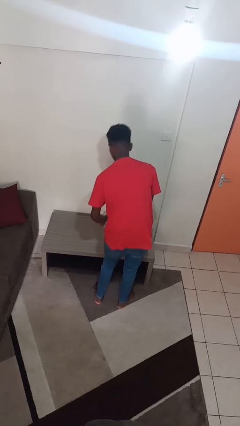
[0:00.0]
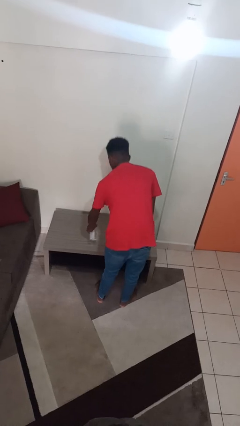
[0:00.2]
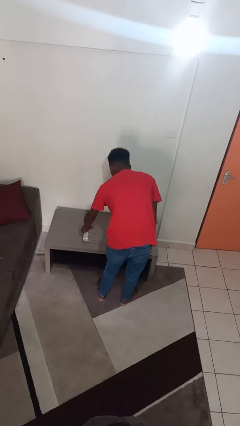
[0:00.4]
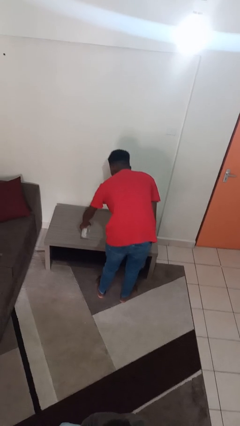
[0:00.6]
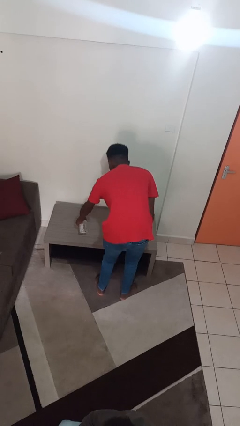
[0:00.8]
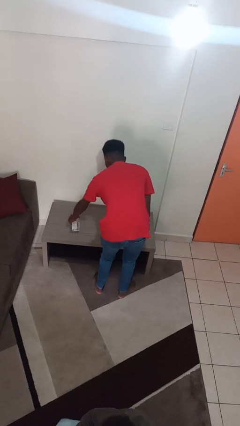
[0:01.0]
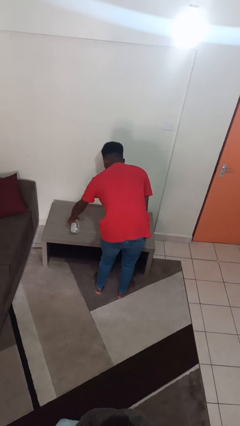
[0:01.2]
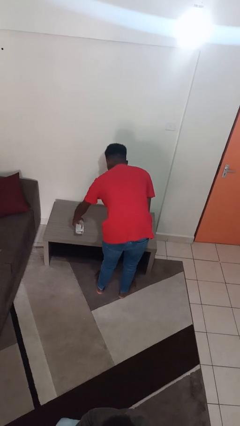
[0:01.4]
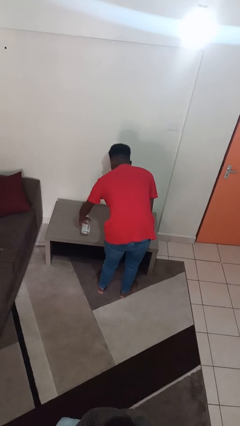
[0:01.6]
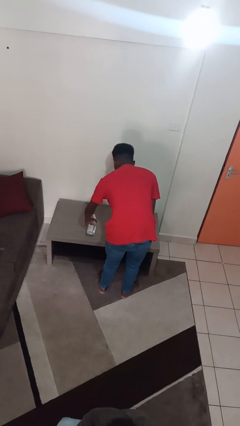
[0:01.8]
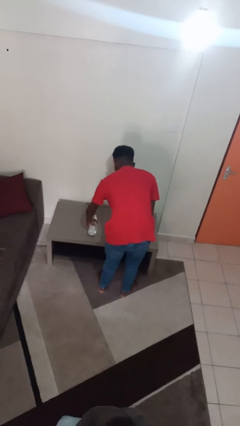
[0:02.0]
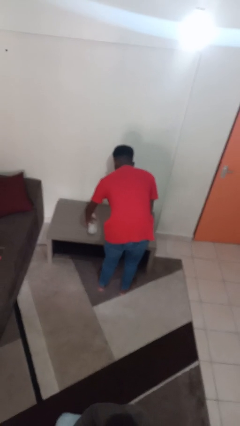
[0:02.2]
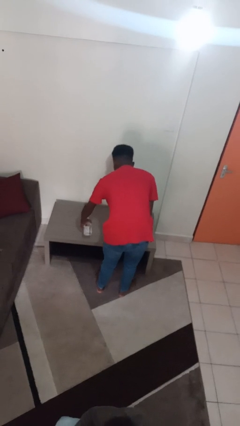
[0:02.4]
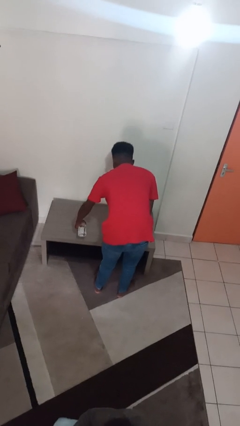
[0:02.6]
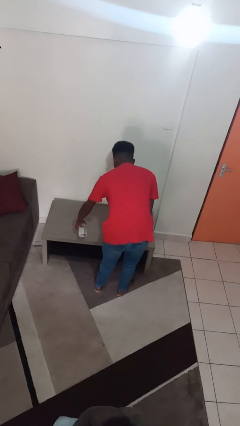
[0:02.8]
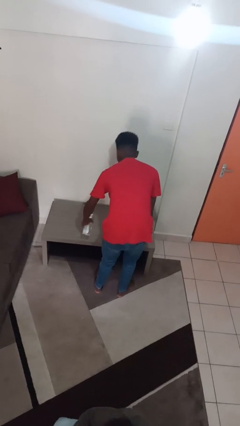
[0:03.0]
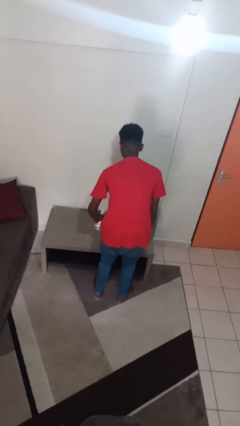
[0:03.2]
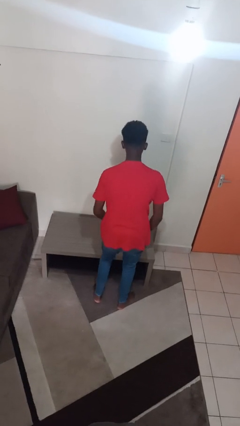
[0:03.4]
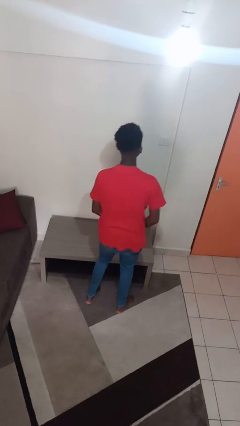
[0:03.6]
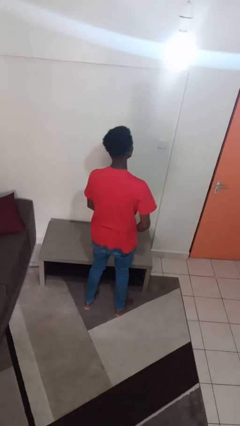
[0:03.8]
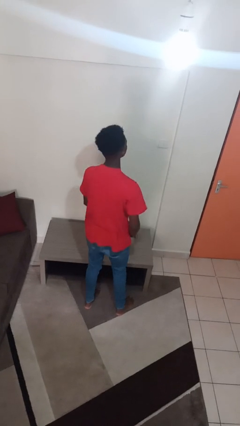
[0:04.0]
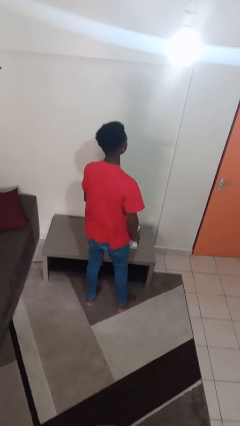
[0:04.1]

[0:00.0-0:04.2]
person sprays from bottle

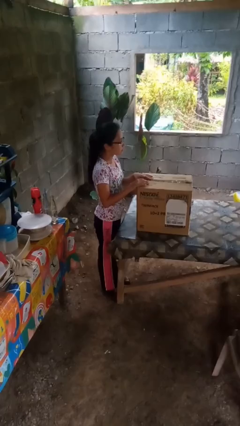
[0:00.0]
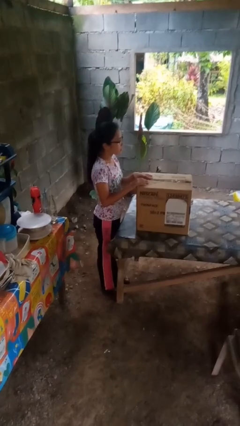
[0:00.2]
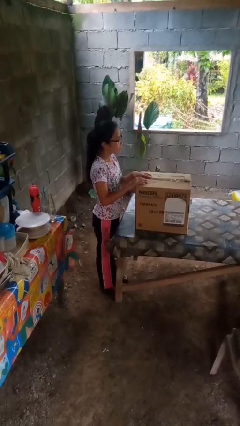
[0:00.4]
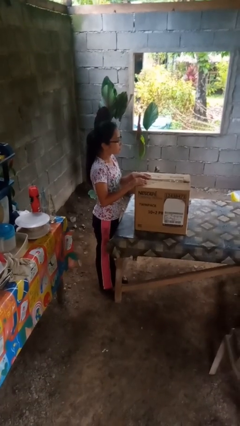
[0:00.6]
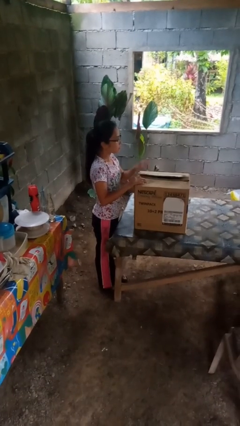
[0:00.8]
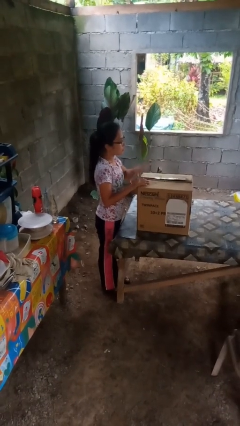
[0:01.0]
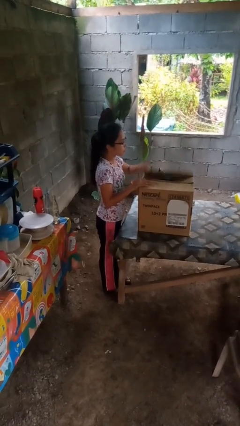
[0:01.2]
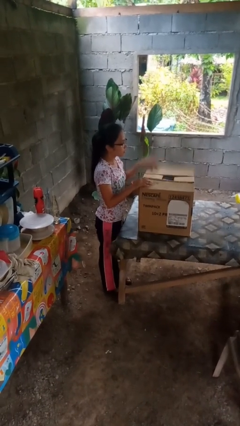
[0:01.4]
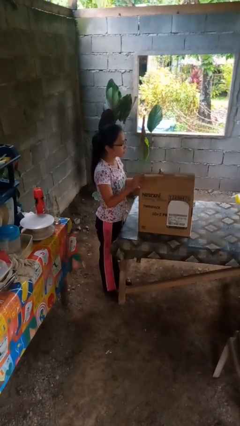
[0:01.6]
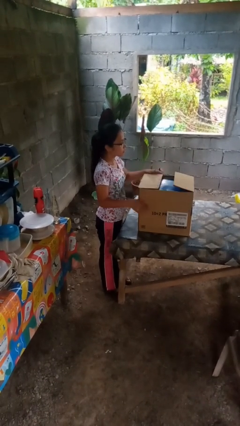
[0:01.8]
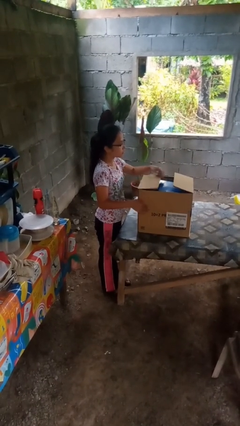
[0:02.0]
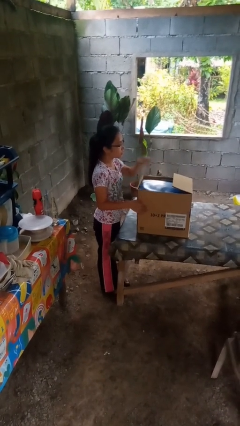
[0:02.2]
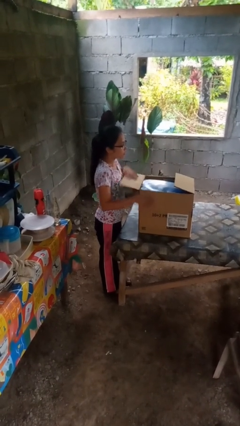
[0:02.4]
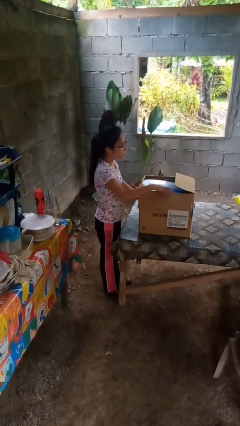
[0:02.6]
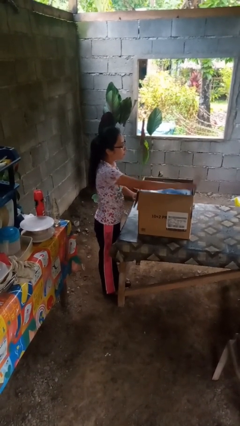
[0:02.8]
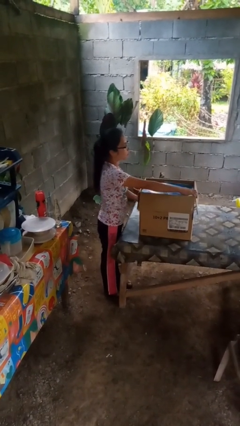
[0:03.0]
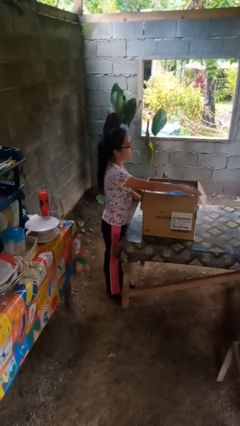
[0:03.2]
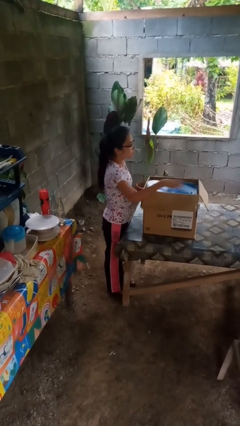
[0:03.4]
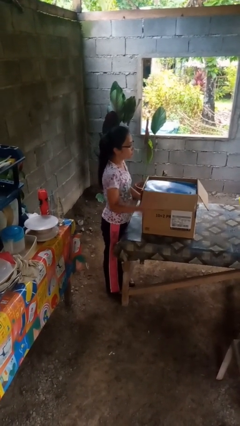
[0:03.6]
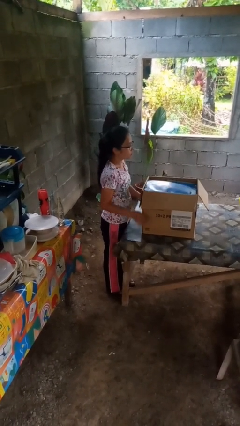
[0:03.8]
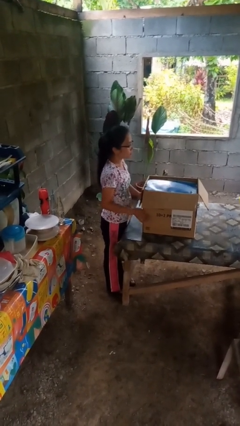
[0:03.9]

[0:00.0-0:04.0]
person opens box

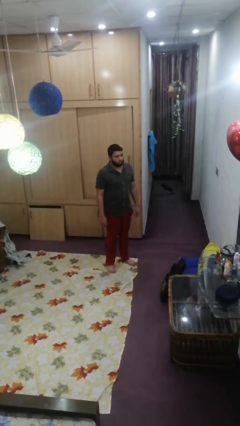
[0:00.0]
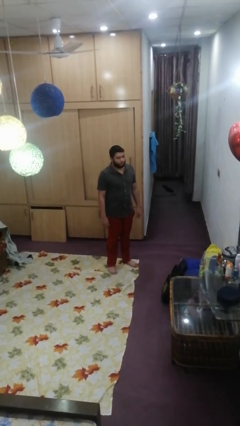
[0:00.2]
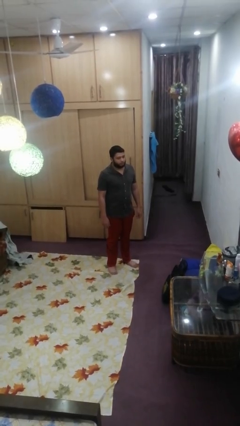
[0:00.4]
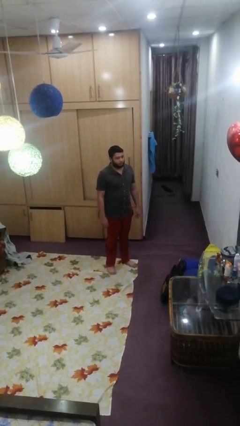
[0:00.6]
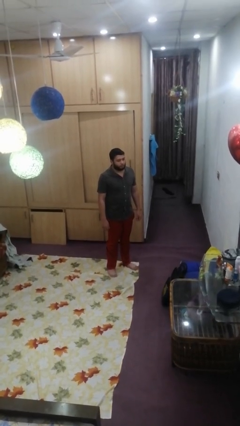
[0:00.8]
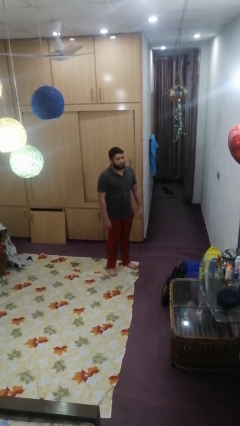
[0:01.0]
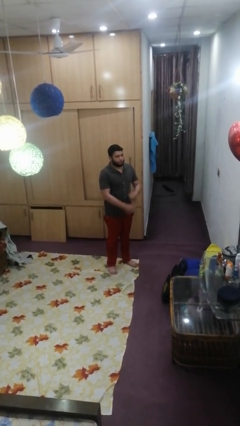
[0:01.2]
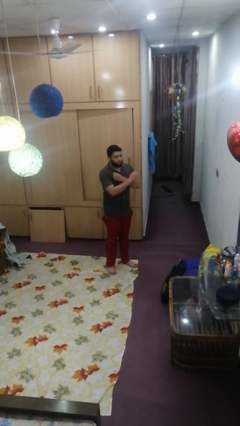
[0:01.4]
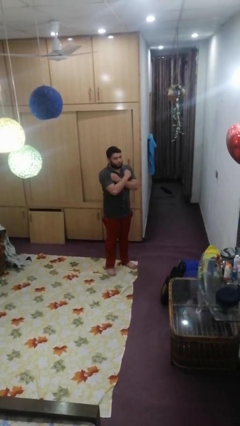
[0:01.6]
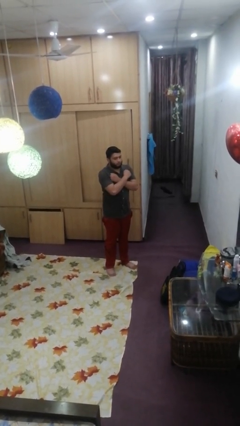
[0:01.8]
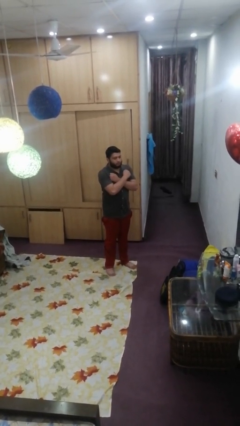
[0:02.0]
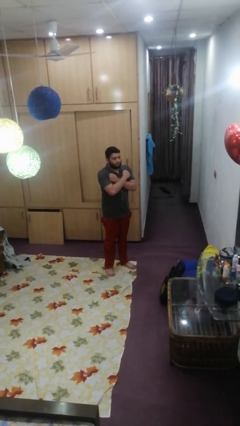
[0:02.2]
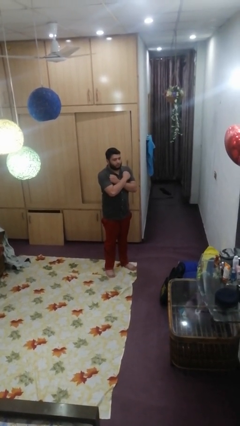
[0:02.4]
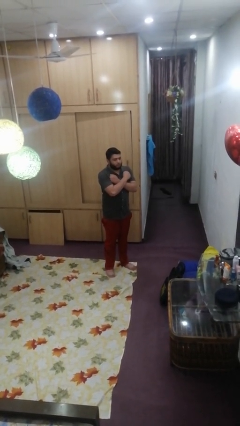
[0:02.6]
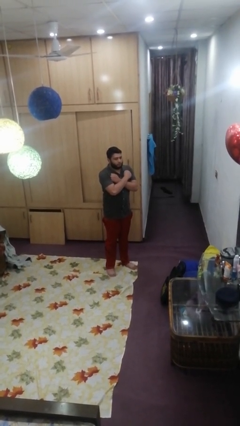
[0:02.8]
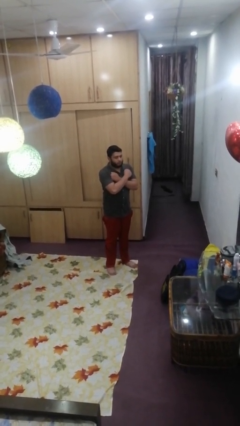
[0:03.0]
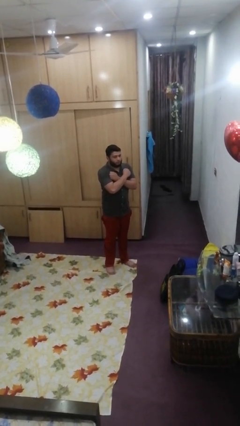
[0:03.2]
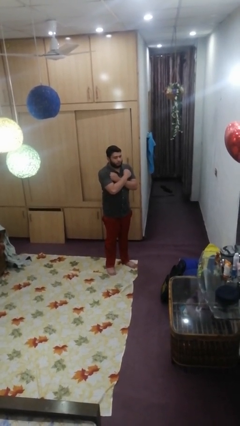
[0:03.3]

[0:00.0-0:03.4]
person crosses arms

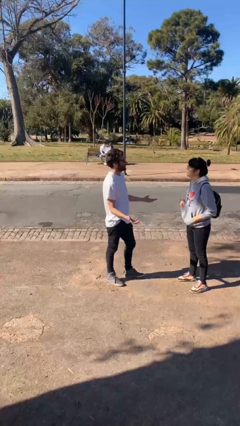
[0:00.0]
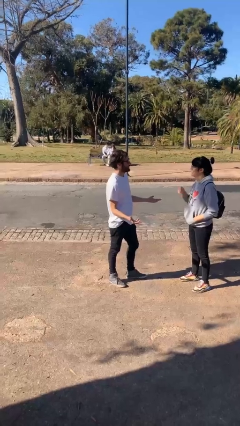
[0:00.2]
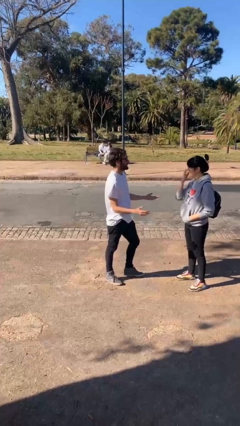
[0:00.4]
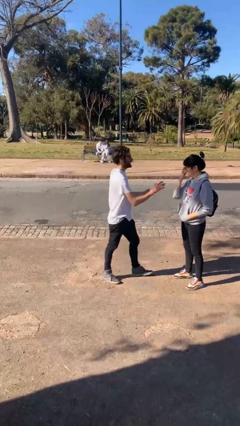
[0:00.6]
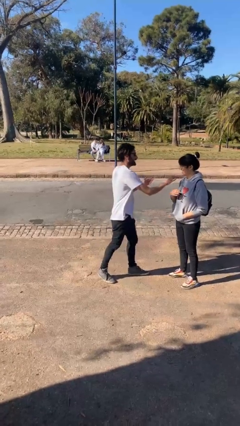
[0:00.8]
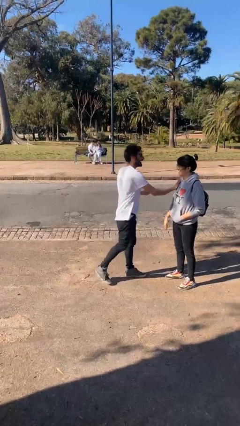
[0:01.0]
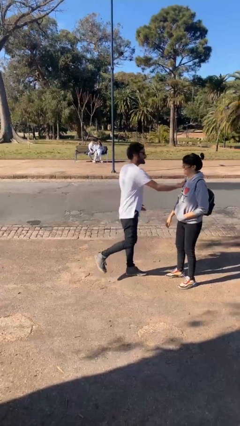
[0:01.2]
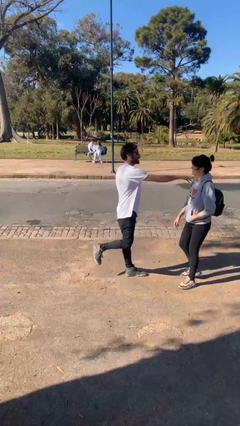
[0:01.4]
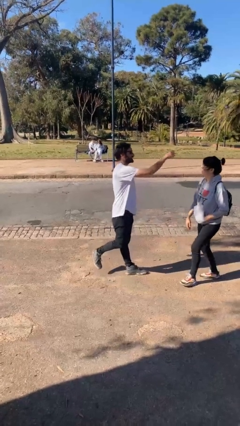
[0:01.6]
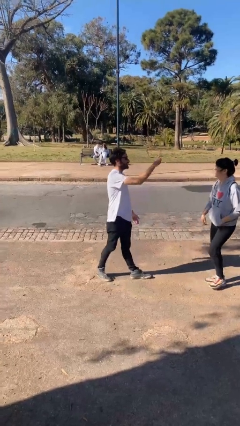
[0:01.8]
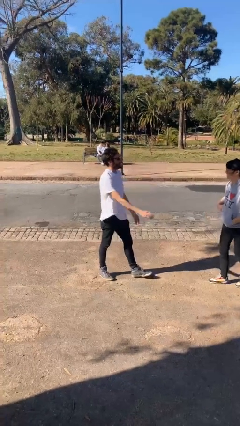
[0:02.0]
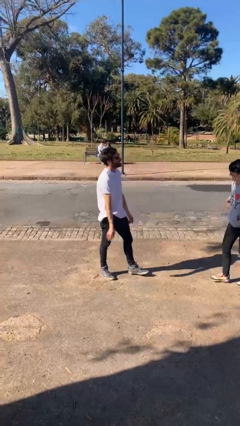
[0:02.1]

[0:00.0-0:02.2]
person shoves person

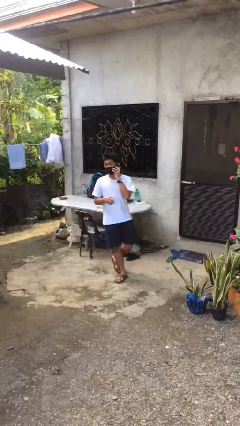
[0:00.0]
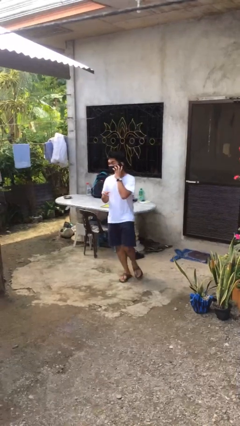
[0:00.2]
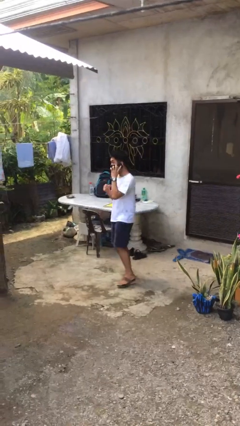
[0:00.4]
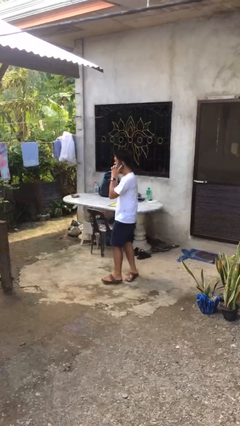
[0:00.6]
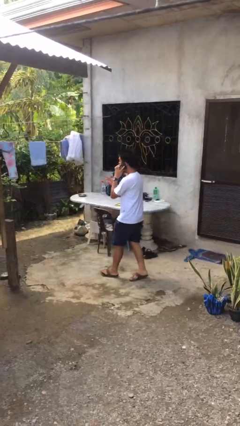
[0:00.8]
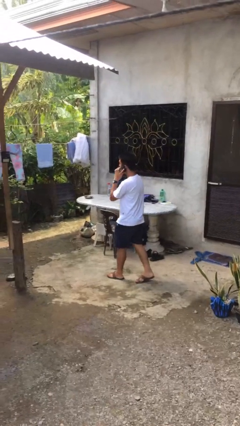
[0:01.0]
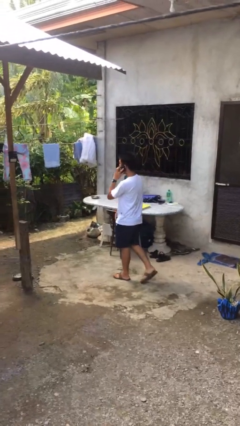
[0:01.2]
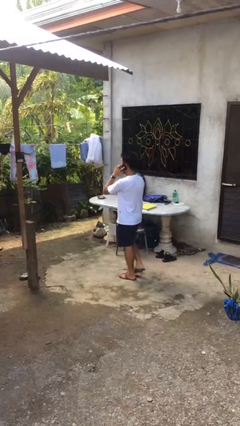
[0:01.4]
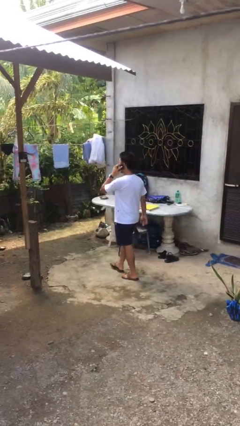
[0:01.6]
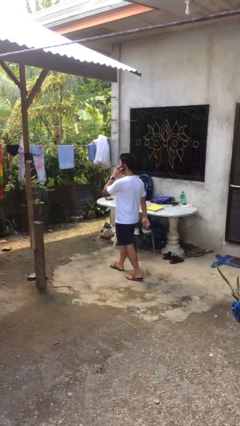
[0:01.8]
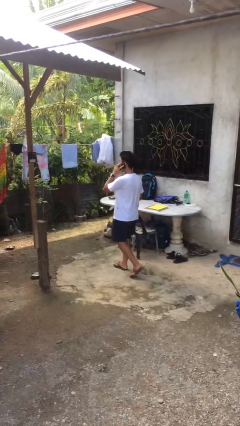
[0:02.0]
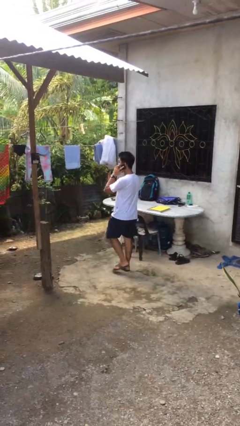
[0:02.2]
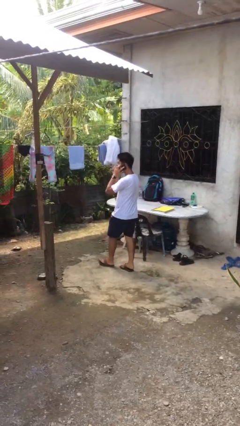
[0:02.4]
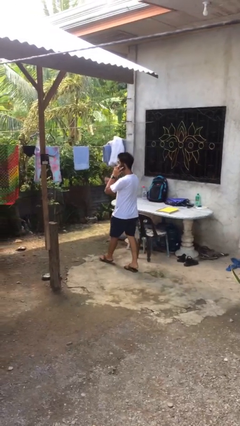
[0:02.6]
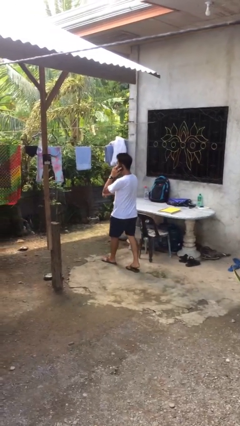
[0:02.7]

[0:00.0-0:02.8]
person talks on phone

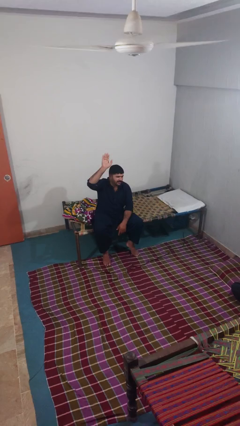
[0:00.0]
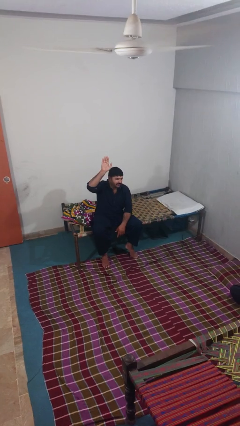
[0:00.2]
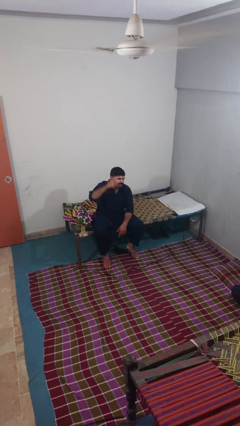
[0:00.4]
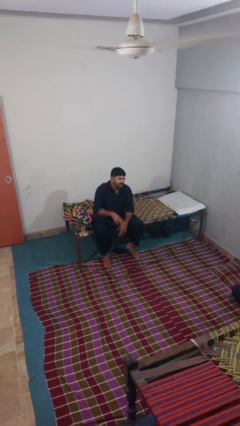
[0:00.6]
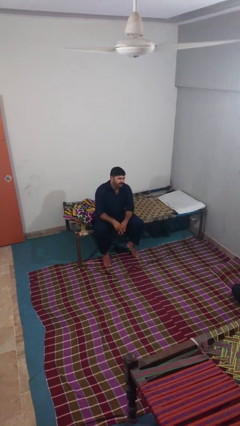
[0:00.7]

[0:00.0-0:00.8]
person gestures swipe down

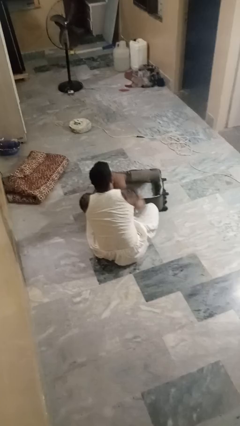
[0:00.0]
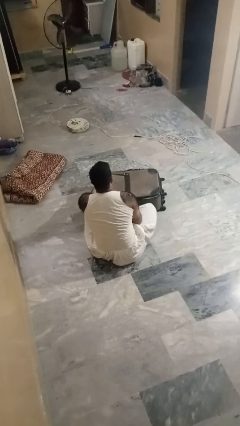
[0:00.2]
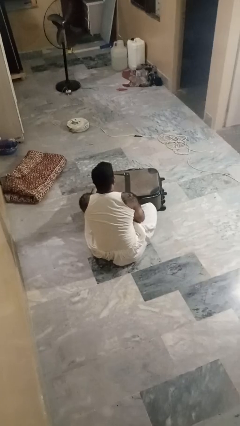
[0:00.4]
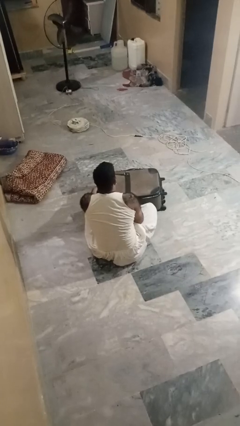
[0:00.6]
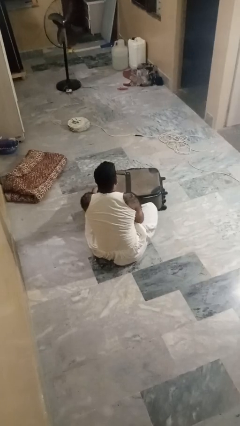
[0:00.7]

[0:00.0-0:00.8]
person closes suitcase
